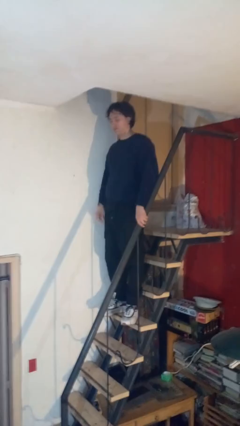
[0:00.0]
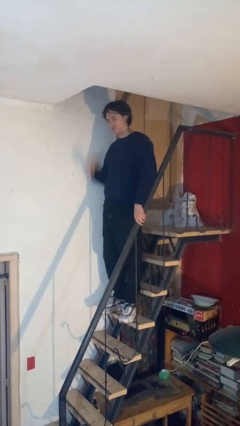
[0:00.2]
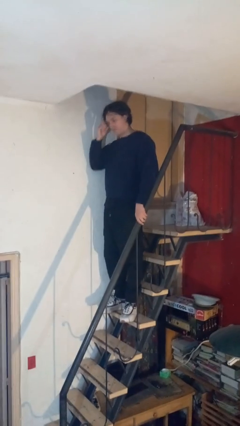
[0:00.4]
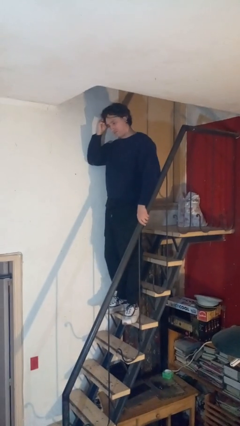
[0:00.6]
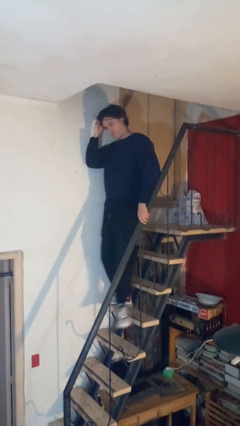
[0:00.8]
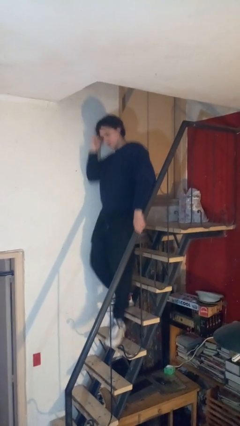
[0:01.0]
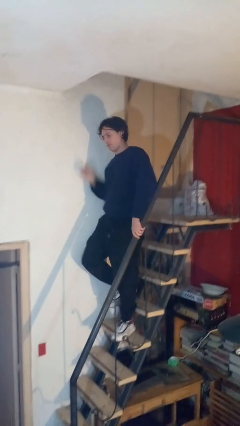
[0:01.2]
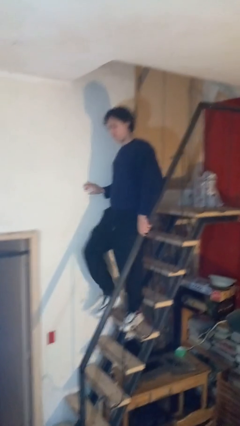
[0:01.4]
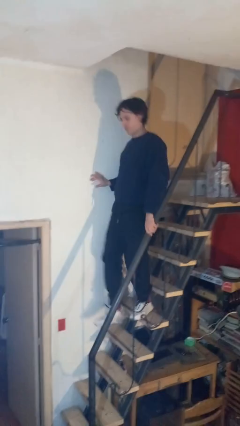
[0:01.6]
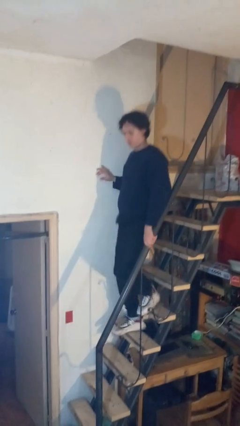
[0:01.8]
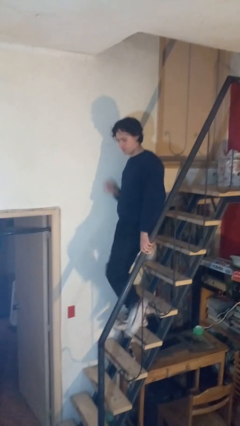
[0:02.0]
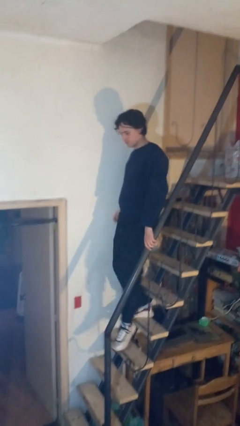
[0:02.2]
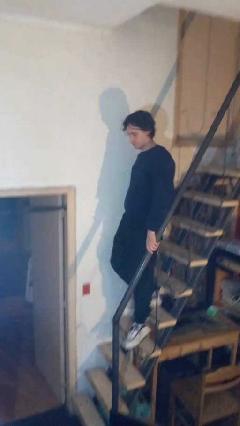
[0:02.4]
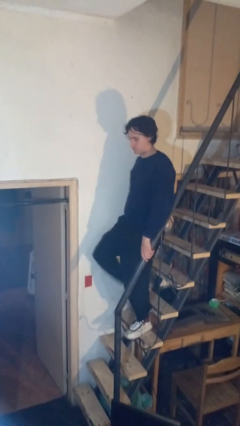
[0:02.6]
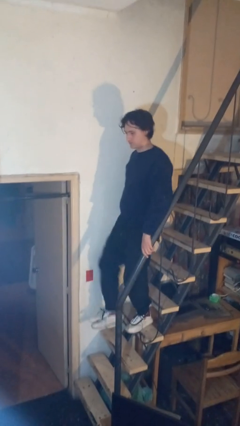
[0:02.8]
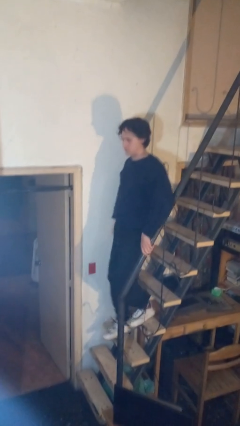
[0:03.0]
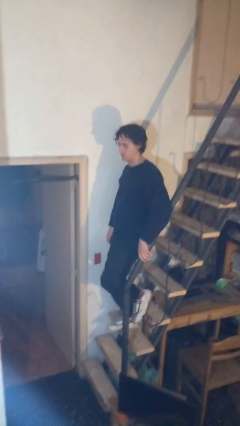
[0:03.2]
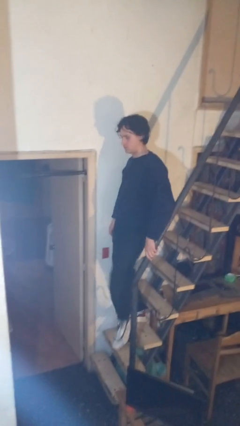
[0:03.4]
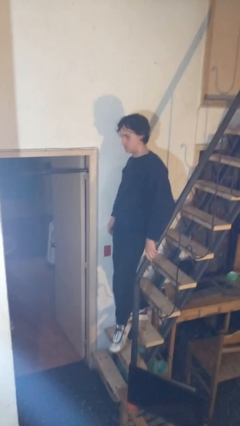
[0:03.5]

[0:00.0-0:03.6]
person climbs down stairs

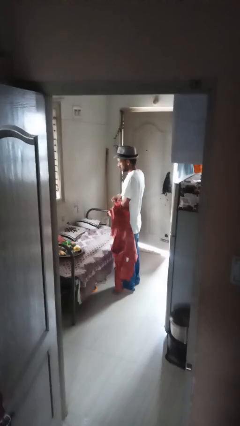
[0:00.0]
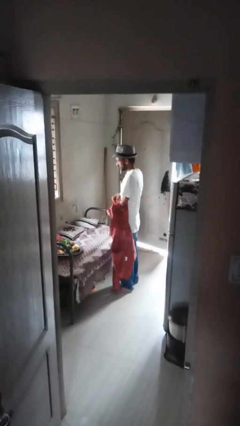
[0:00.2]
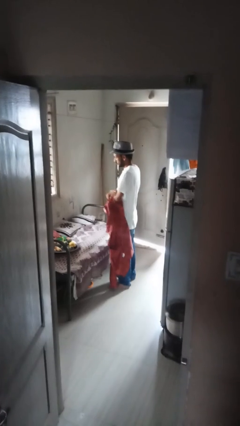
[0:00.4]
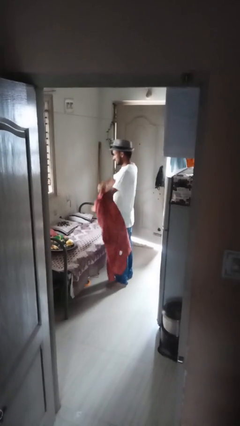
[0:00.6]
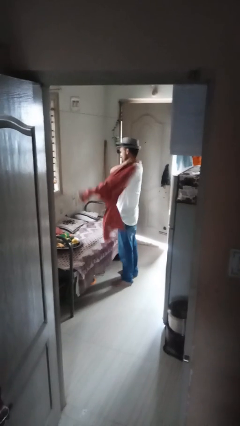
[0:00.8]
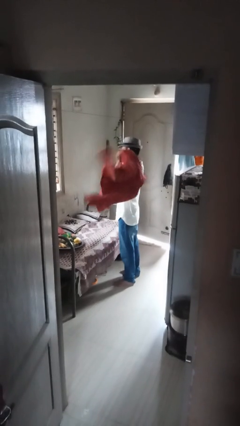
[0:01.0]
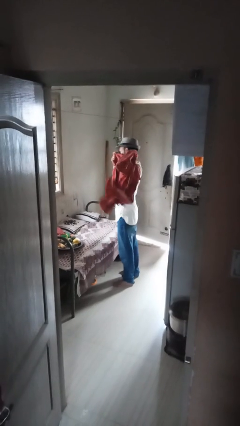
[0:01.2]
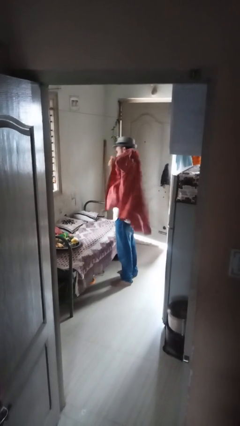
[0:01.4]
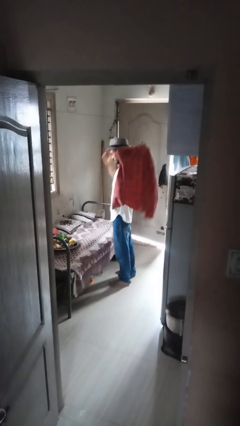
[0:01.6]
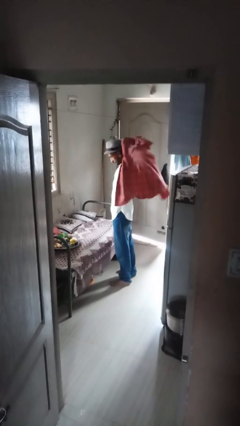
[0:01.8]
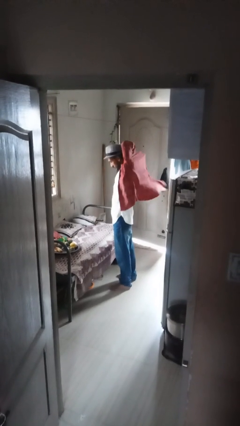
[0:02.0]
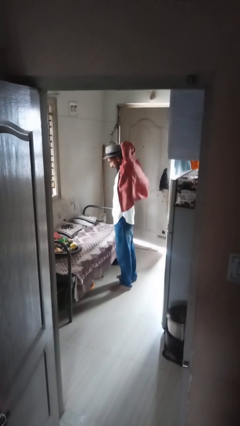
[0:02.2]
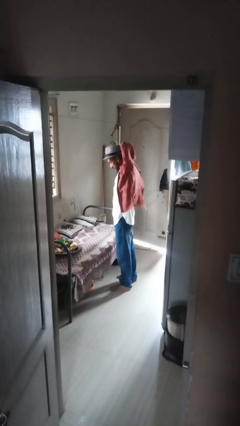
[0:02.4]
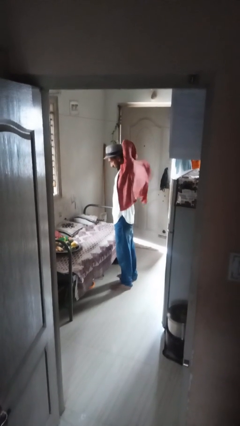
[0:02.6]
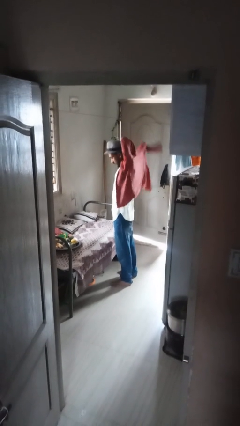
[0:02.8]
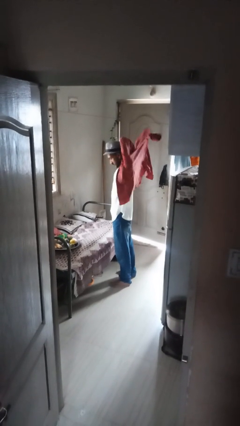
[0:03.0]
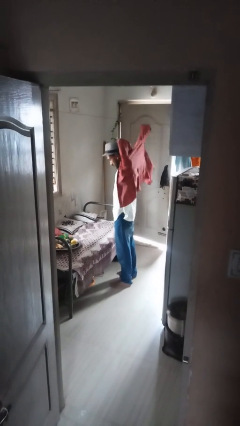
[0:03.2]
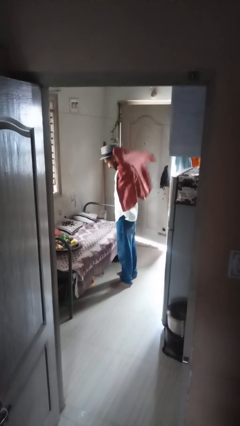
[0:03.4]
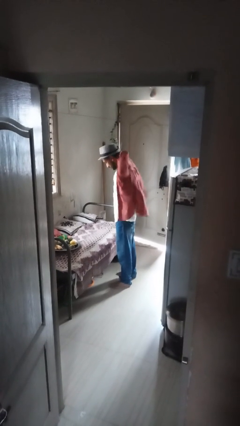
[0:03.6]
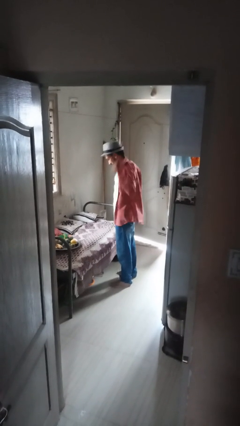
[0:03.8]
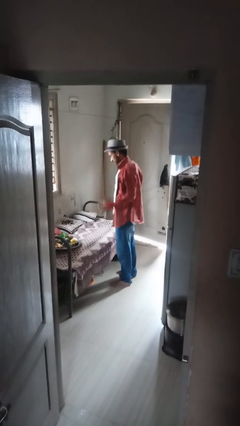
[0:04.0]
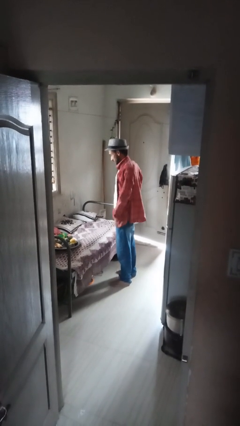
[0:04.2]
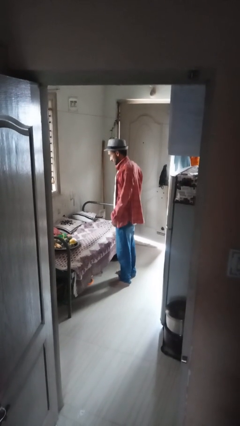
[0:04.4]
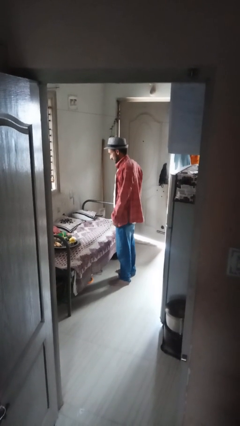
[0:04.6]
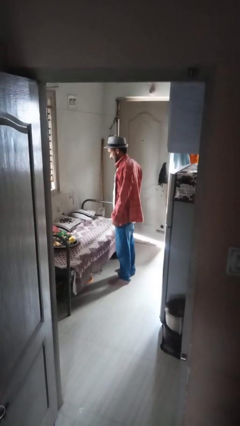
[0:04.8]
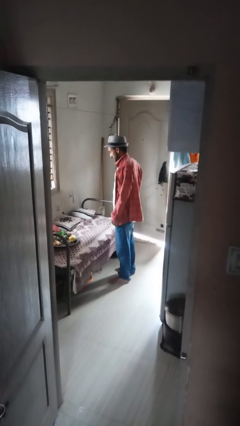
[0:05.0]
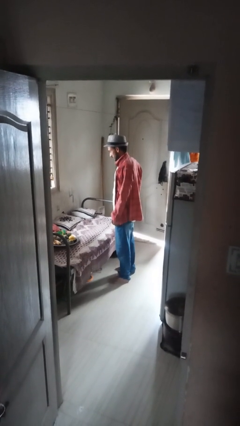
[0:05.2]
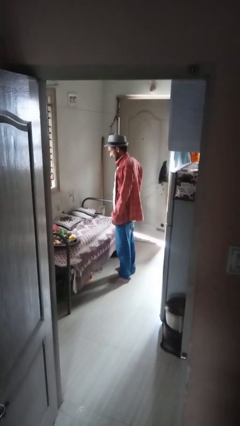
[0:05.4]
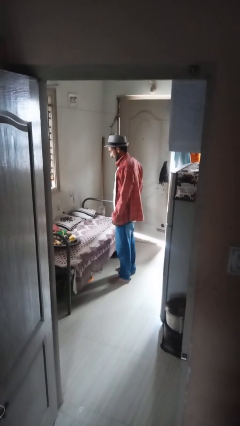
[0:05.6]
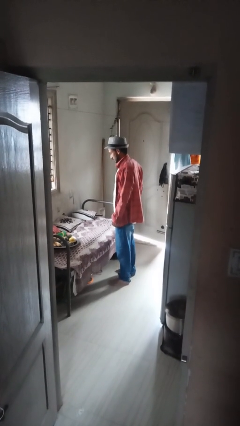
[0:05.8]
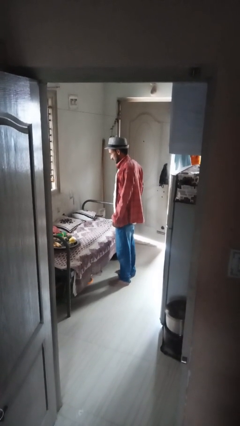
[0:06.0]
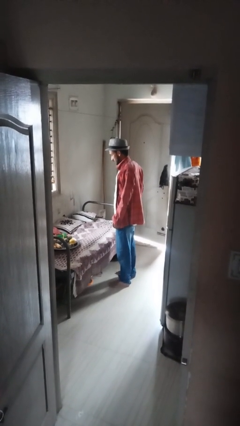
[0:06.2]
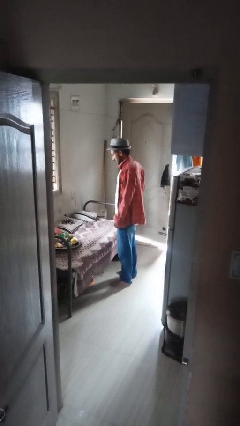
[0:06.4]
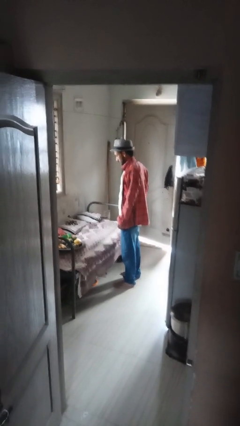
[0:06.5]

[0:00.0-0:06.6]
person puts on shirt

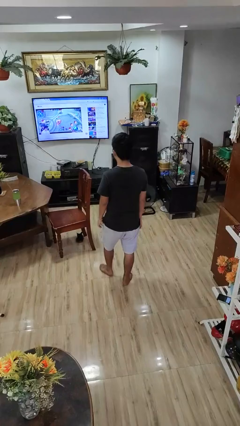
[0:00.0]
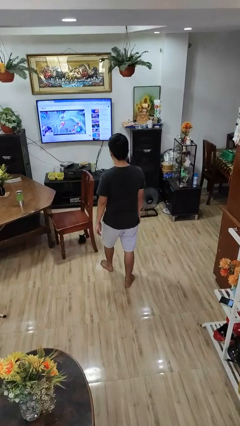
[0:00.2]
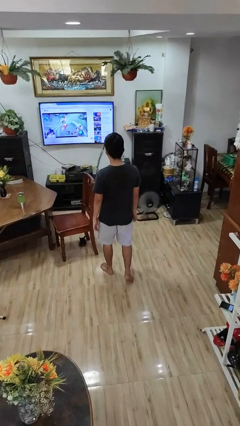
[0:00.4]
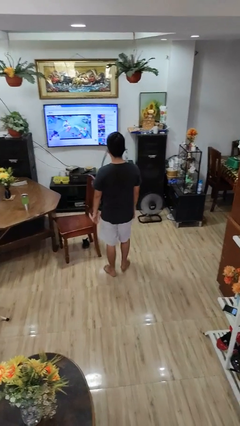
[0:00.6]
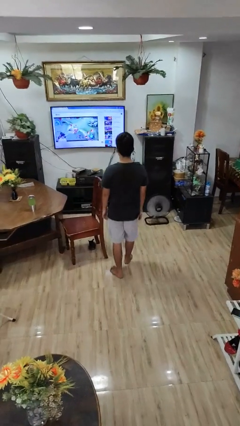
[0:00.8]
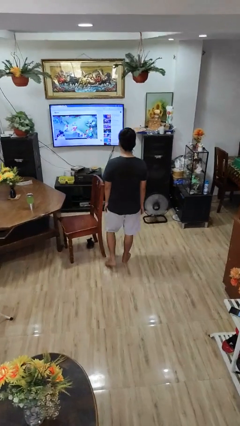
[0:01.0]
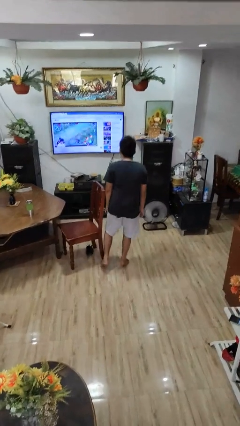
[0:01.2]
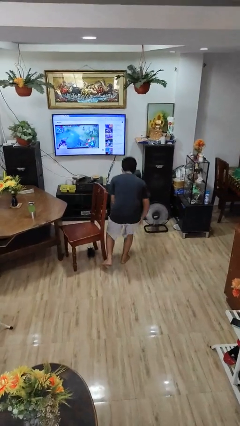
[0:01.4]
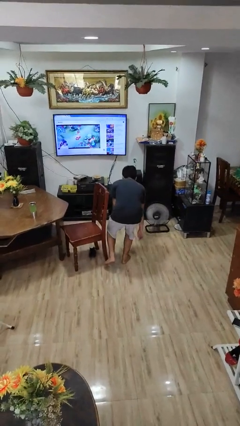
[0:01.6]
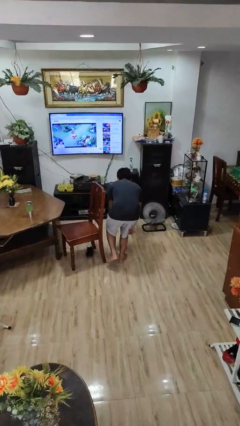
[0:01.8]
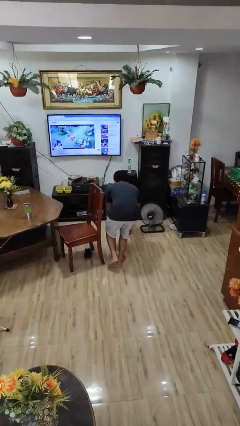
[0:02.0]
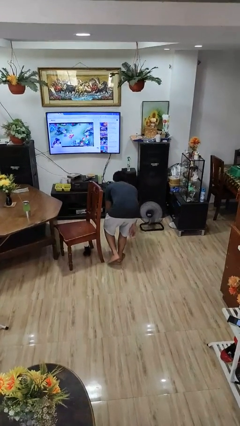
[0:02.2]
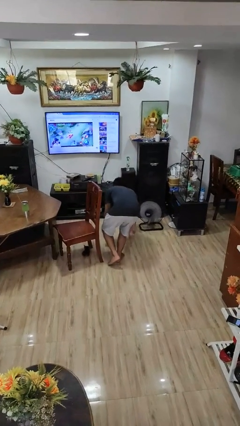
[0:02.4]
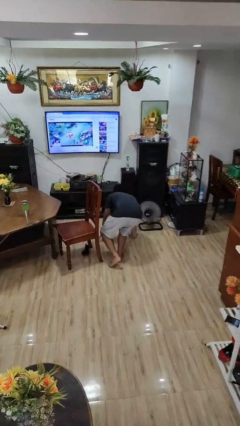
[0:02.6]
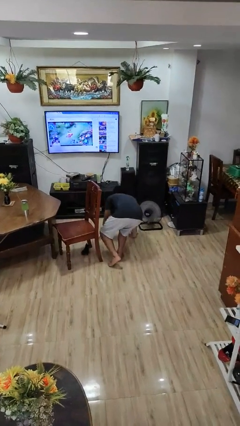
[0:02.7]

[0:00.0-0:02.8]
person trips on object on floor

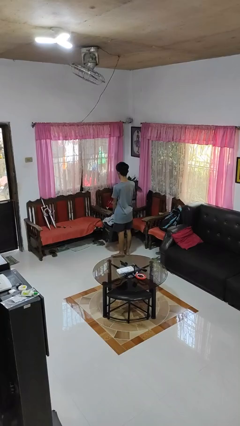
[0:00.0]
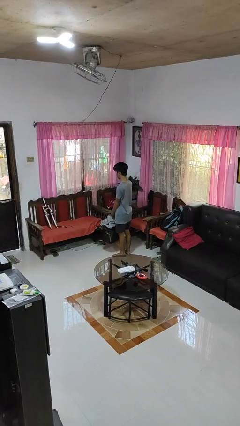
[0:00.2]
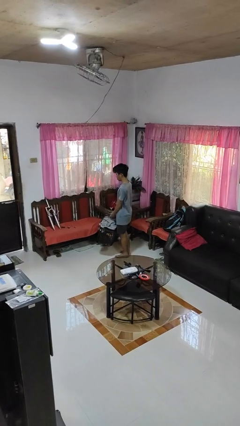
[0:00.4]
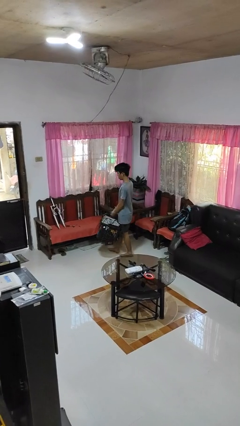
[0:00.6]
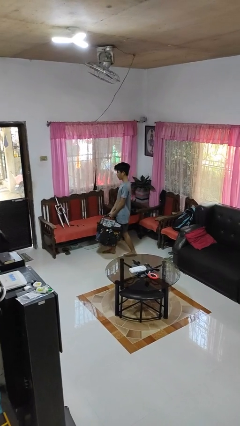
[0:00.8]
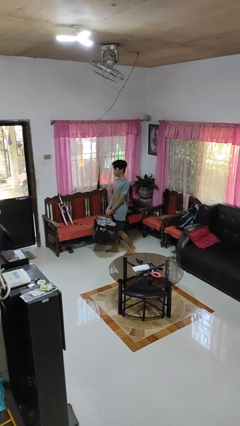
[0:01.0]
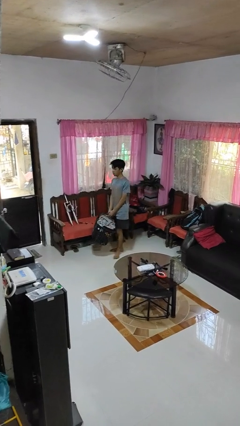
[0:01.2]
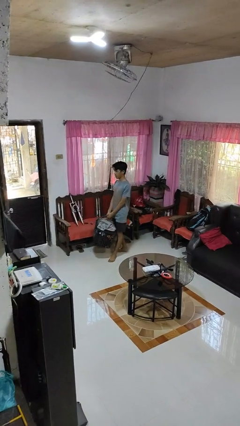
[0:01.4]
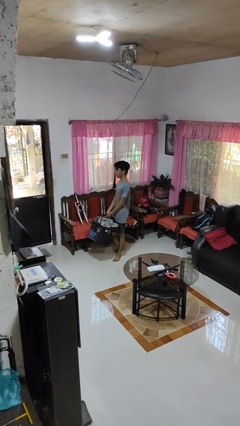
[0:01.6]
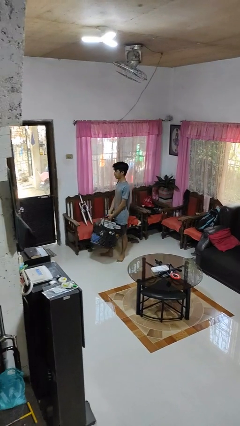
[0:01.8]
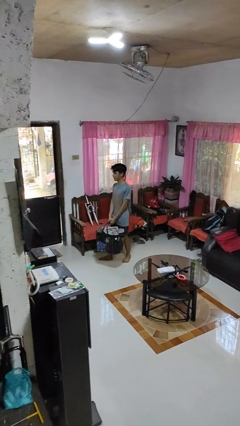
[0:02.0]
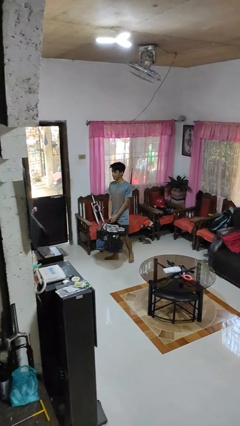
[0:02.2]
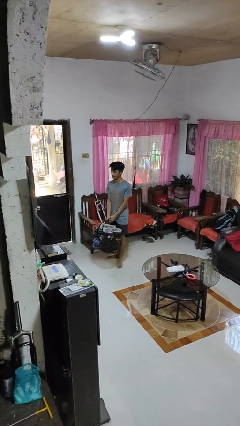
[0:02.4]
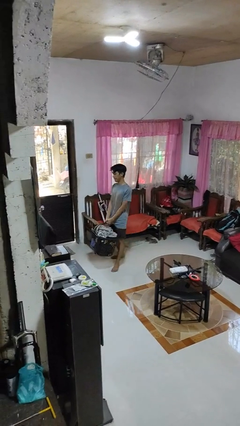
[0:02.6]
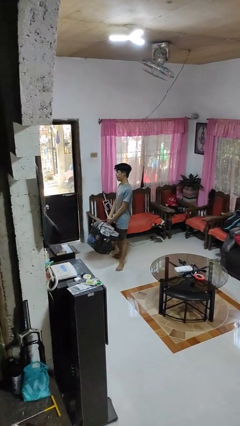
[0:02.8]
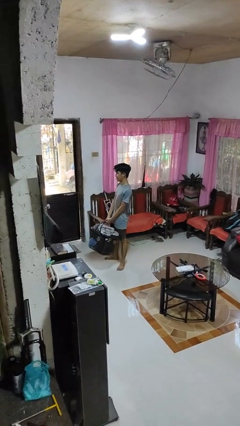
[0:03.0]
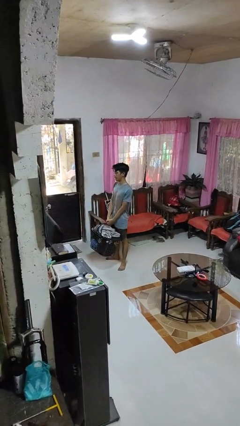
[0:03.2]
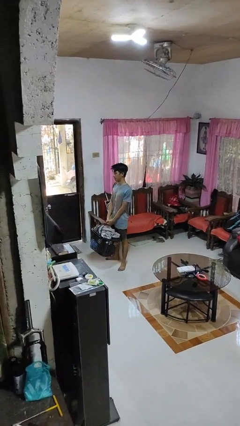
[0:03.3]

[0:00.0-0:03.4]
person carries laundry basket

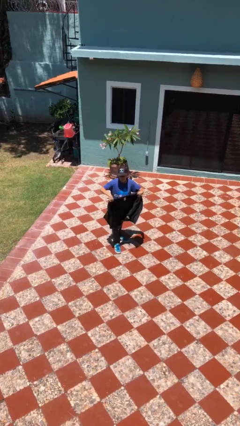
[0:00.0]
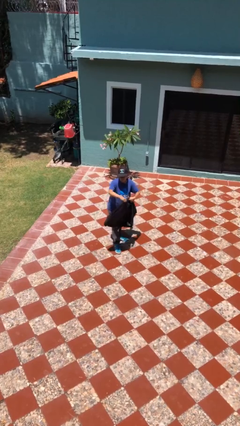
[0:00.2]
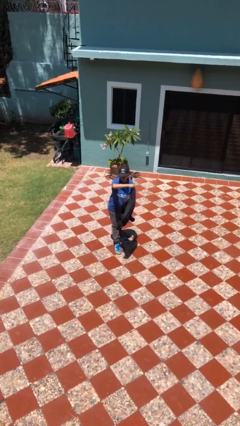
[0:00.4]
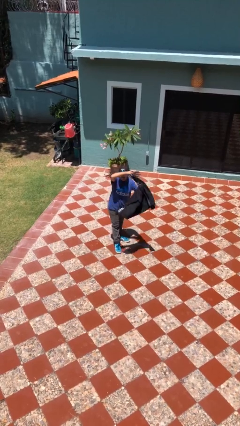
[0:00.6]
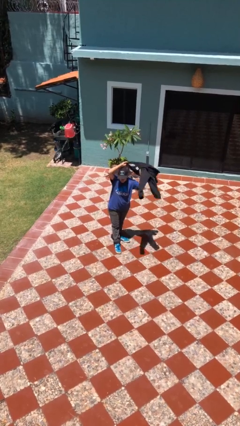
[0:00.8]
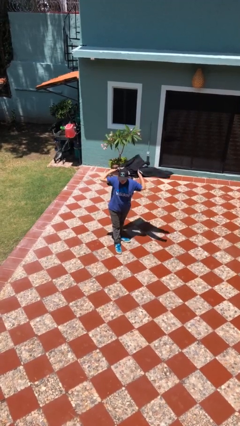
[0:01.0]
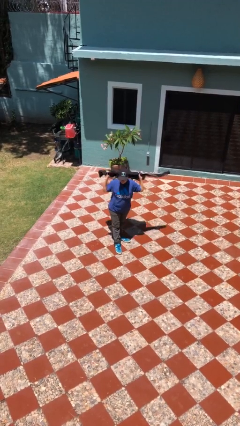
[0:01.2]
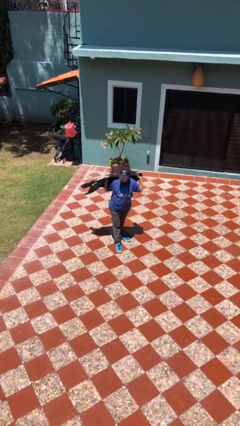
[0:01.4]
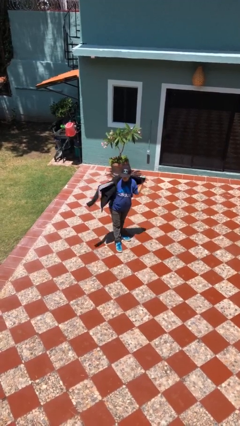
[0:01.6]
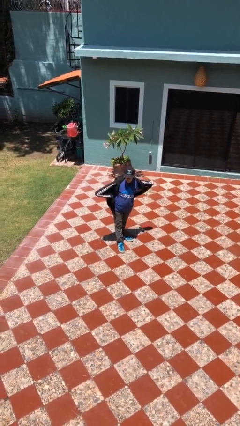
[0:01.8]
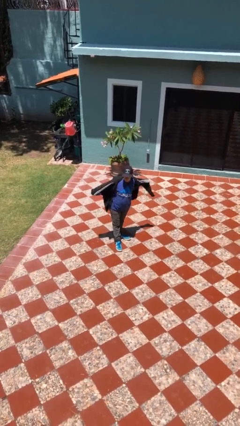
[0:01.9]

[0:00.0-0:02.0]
person puts on jacket
